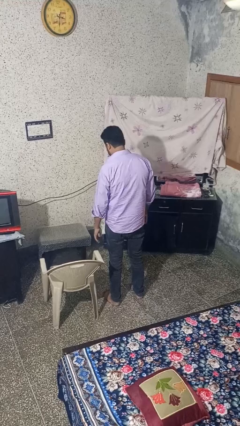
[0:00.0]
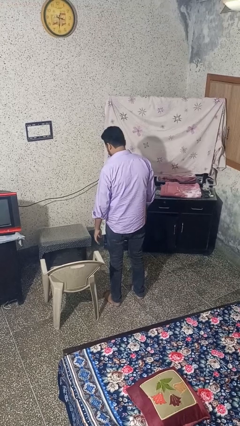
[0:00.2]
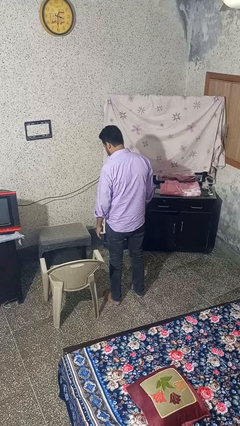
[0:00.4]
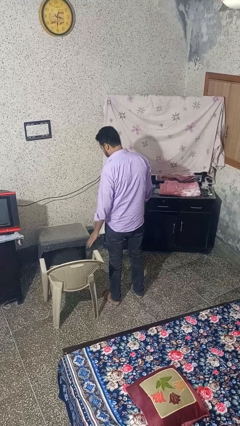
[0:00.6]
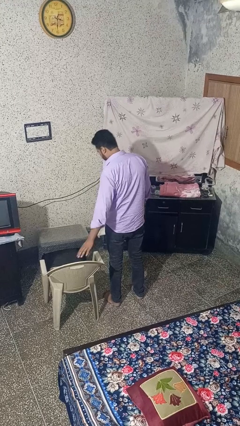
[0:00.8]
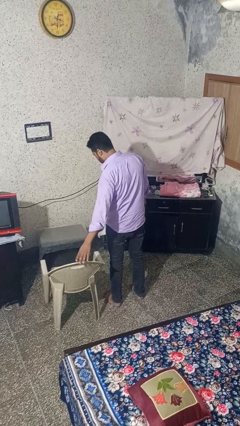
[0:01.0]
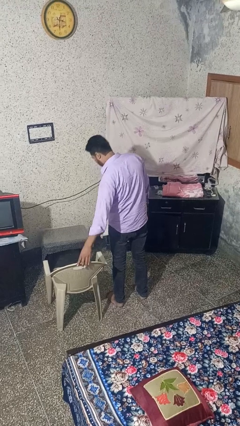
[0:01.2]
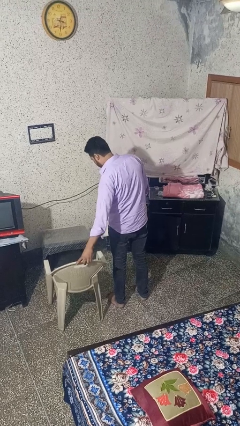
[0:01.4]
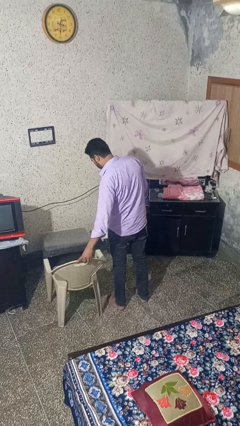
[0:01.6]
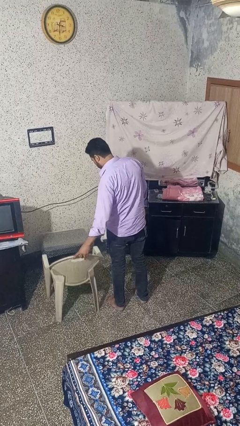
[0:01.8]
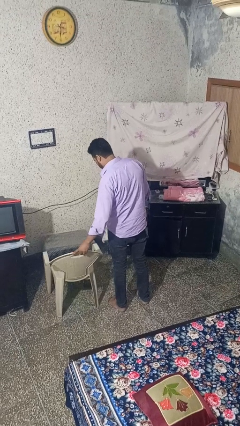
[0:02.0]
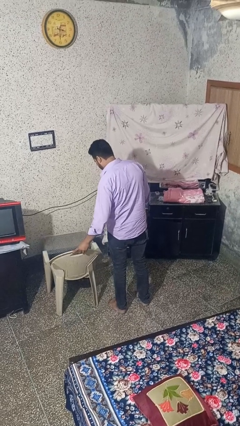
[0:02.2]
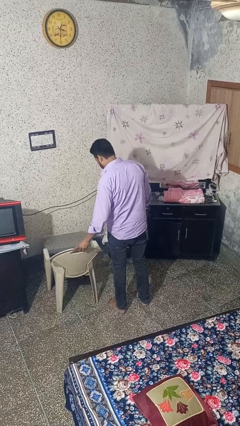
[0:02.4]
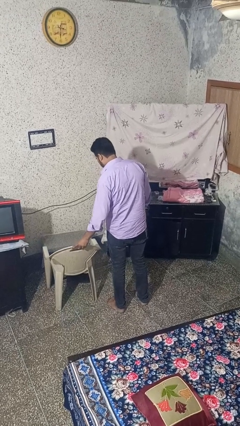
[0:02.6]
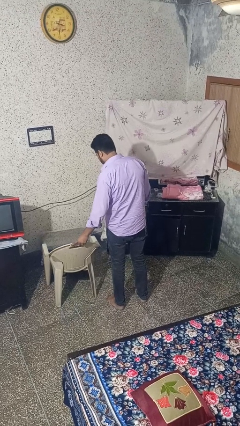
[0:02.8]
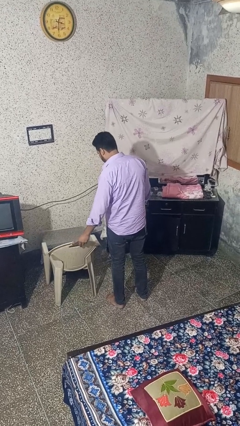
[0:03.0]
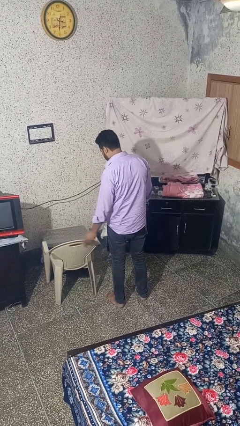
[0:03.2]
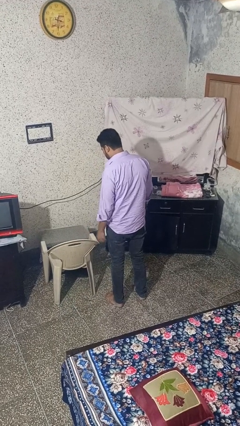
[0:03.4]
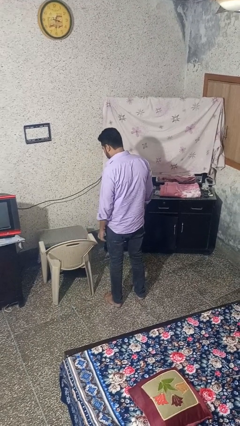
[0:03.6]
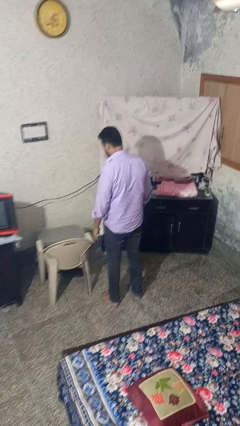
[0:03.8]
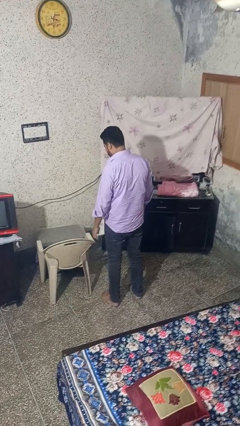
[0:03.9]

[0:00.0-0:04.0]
person pushes in chair

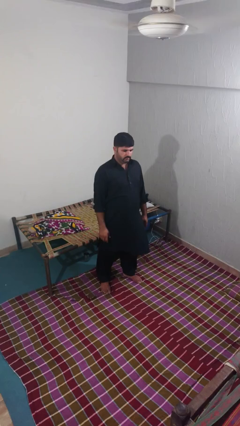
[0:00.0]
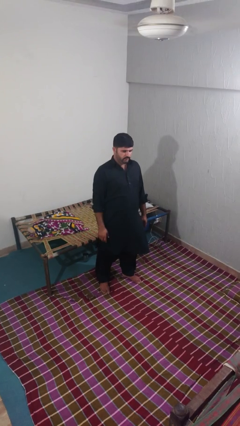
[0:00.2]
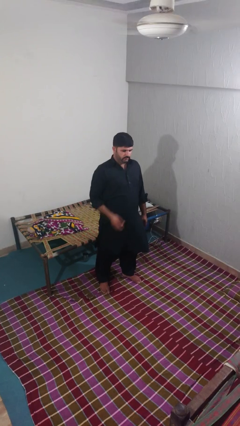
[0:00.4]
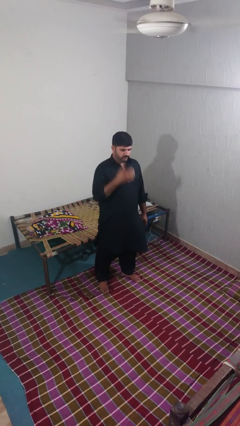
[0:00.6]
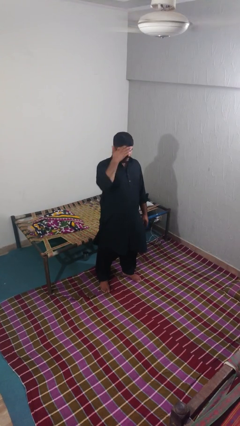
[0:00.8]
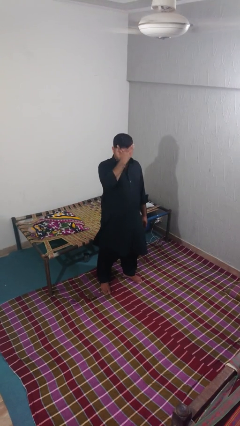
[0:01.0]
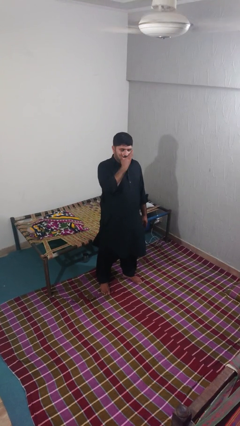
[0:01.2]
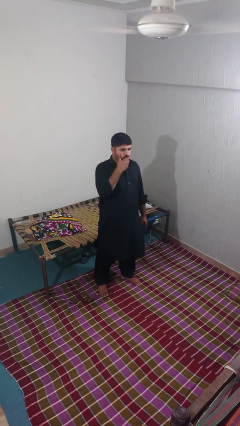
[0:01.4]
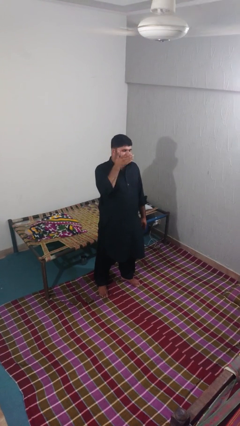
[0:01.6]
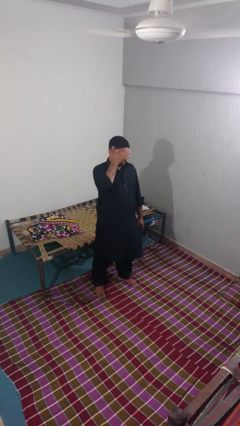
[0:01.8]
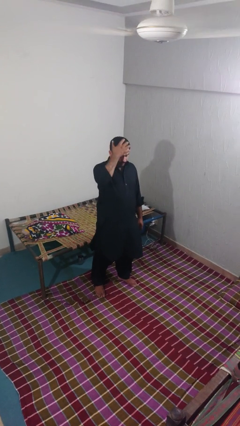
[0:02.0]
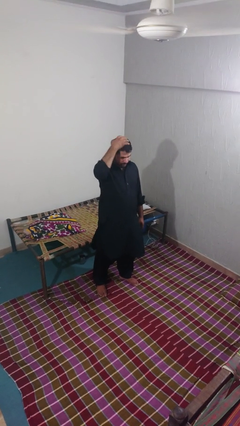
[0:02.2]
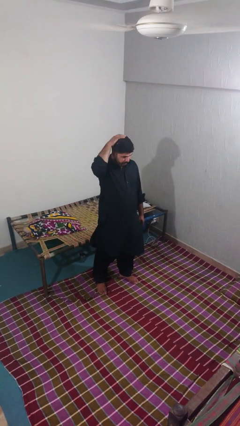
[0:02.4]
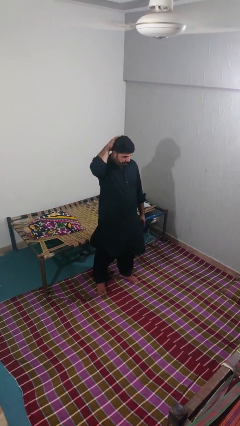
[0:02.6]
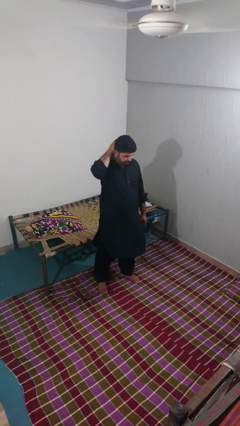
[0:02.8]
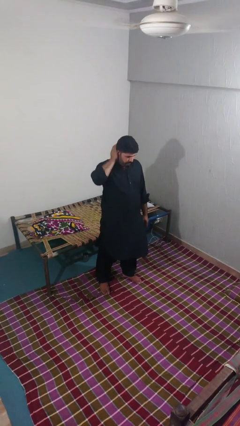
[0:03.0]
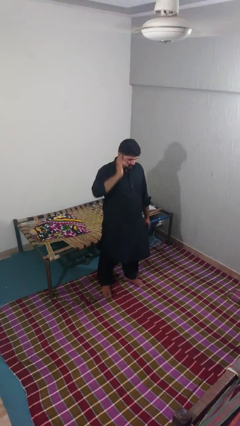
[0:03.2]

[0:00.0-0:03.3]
person scratches face

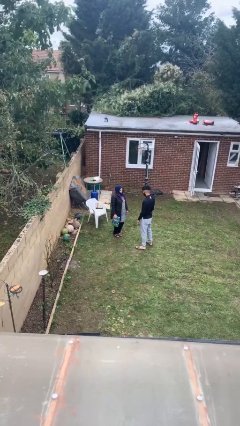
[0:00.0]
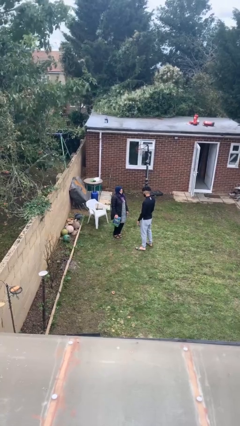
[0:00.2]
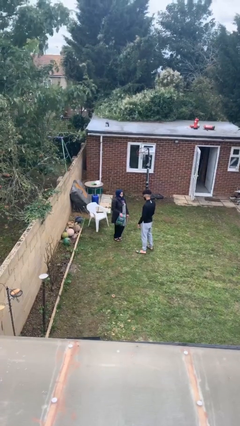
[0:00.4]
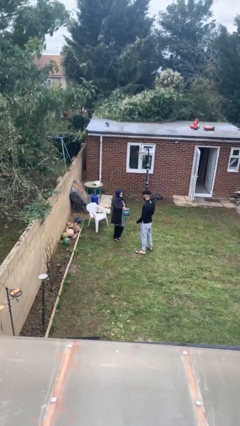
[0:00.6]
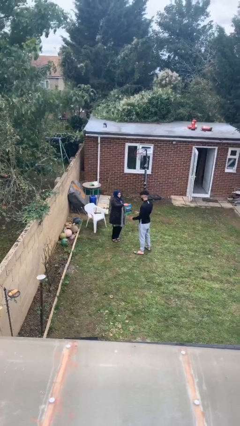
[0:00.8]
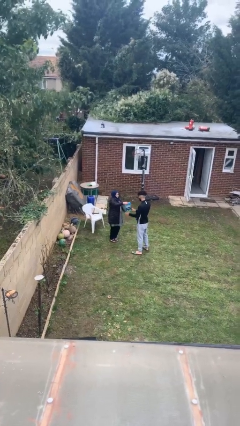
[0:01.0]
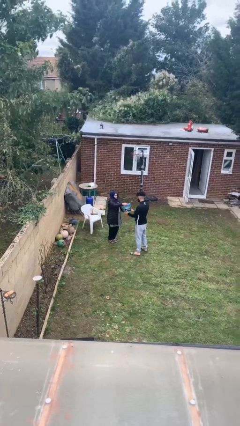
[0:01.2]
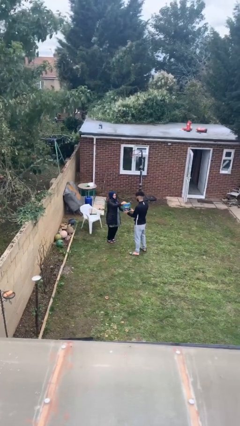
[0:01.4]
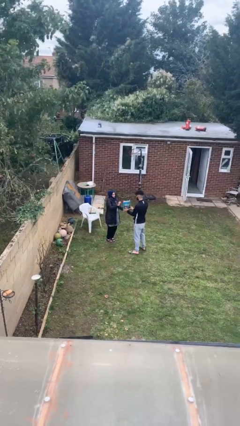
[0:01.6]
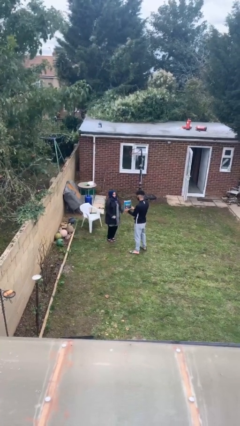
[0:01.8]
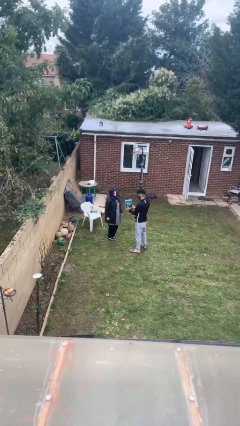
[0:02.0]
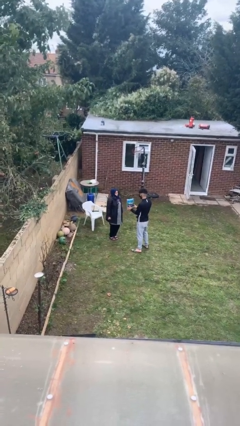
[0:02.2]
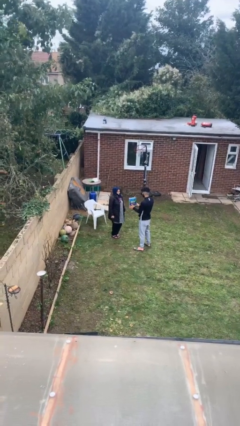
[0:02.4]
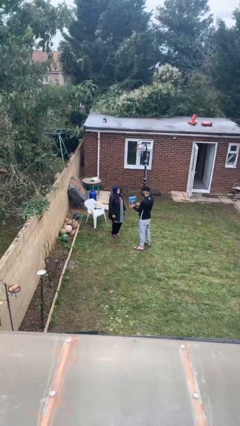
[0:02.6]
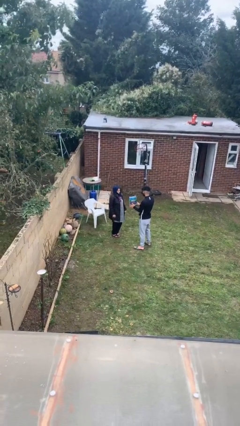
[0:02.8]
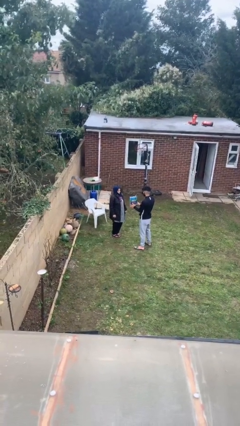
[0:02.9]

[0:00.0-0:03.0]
person transfers object to person

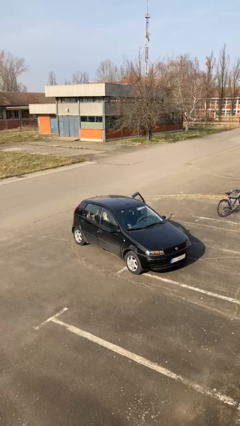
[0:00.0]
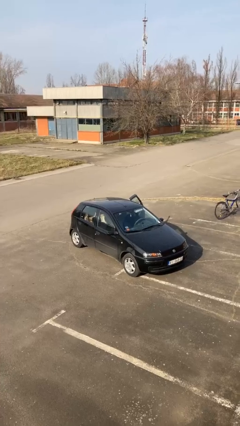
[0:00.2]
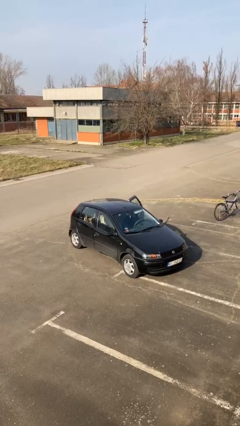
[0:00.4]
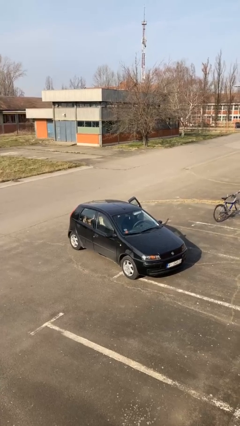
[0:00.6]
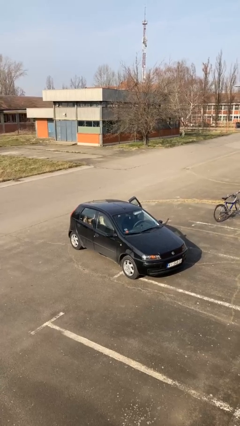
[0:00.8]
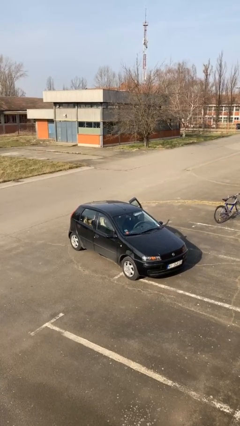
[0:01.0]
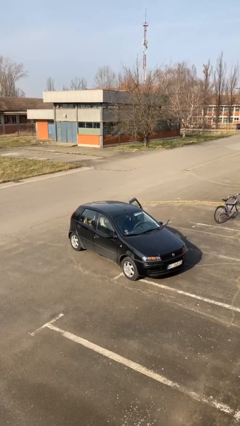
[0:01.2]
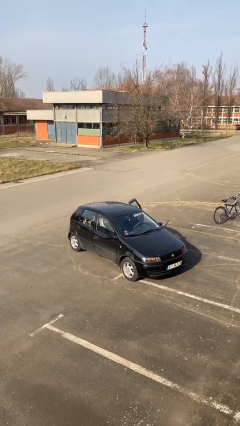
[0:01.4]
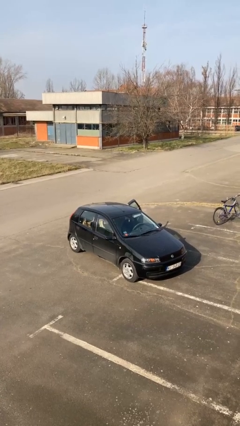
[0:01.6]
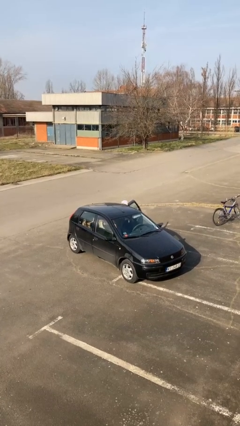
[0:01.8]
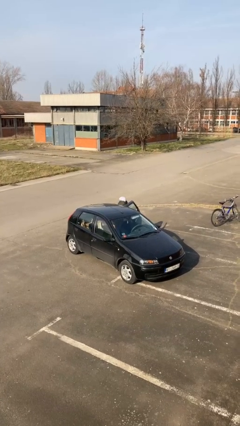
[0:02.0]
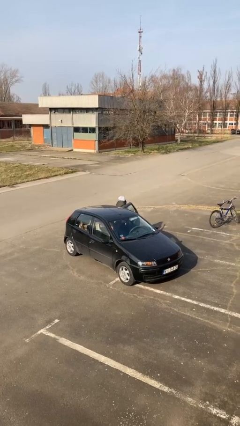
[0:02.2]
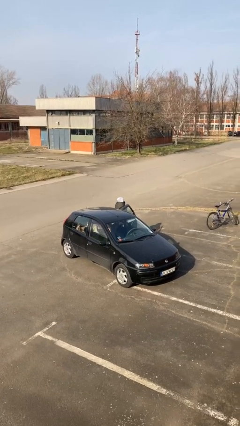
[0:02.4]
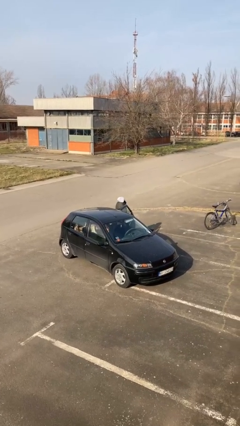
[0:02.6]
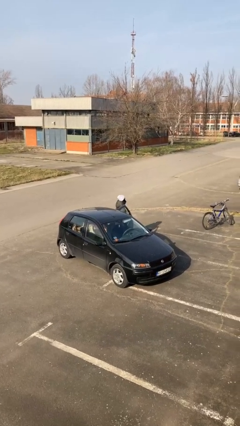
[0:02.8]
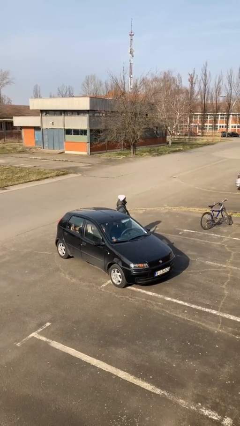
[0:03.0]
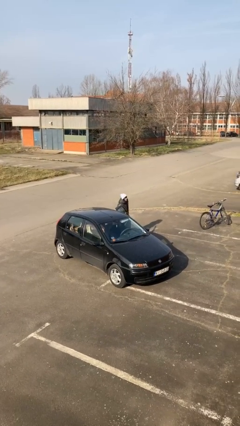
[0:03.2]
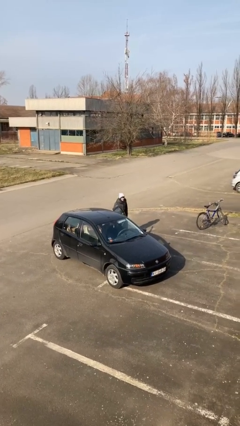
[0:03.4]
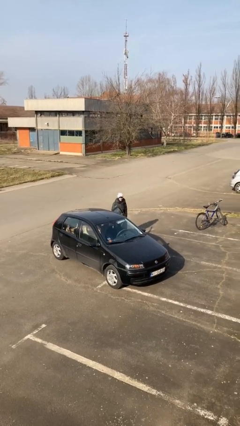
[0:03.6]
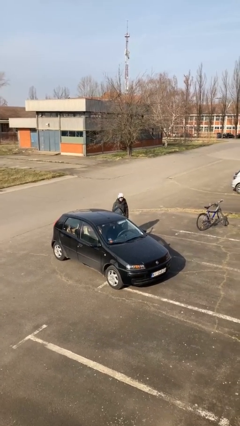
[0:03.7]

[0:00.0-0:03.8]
person exits car

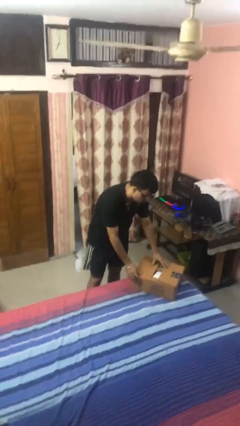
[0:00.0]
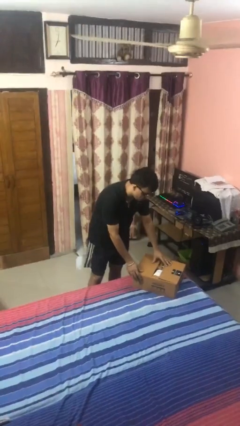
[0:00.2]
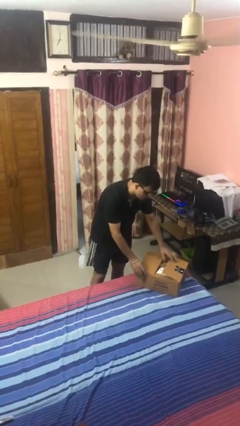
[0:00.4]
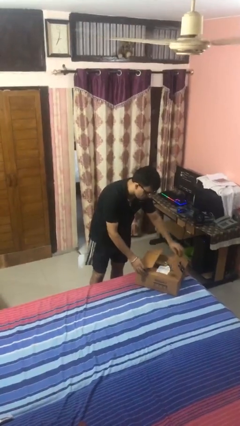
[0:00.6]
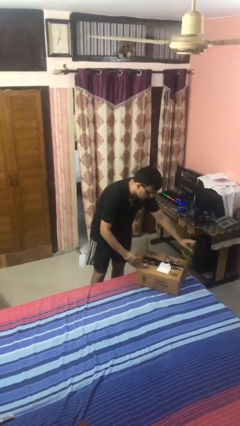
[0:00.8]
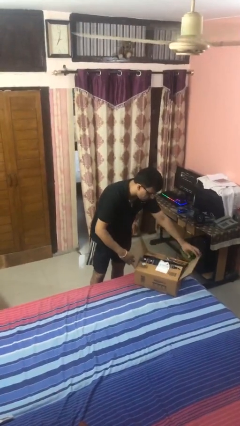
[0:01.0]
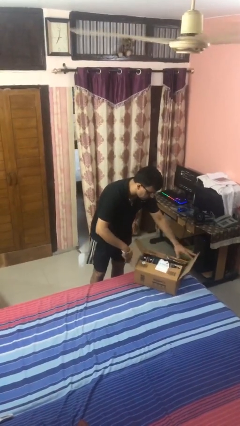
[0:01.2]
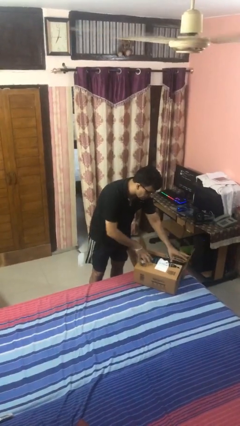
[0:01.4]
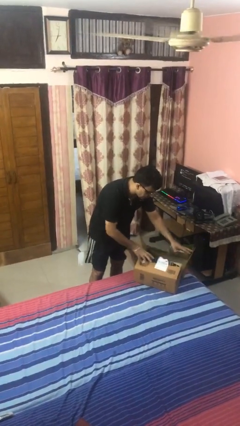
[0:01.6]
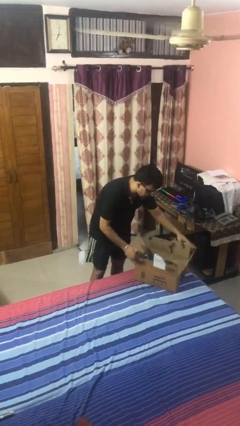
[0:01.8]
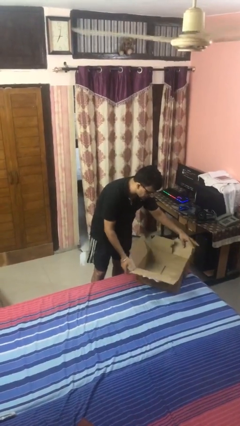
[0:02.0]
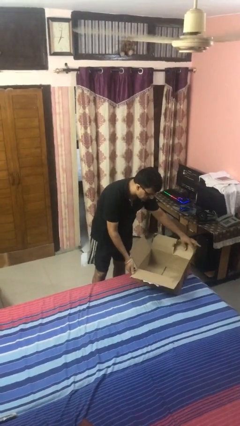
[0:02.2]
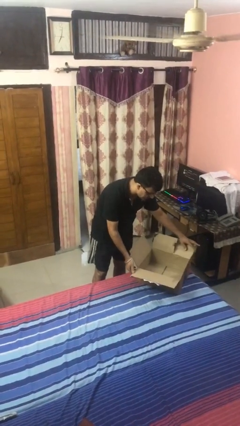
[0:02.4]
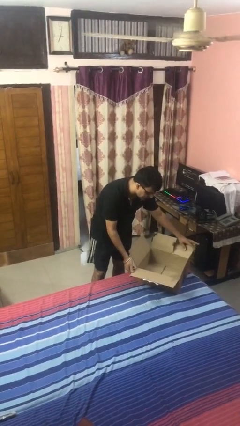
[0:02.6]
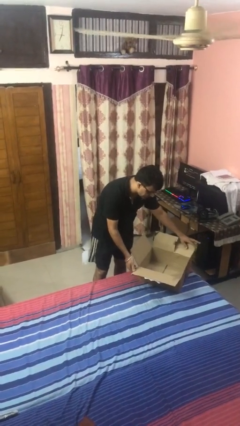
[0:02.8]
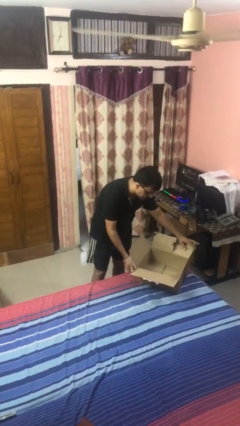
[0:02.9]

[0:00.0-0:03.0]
person opens box

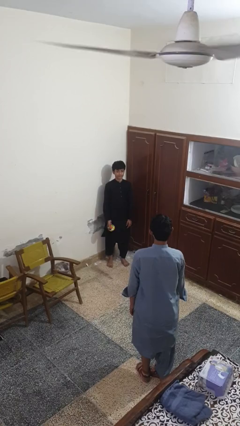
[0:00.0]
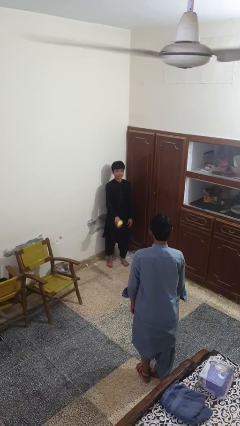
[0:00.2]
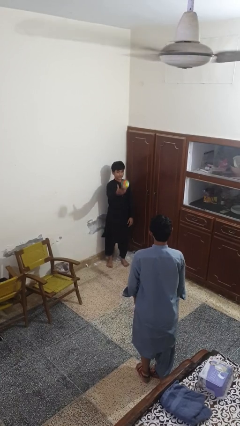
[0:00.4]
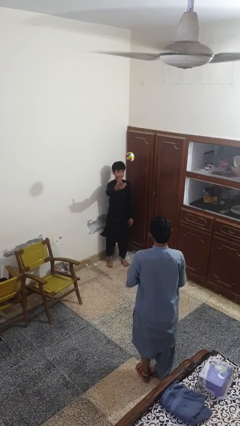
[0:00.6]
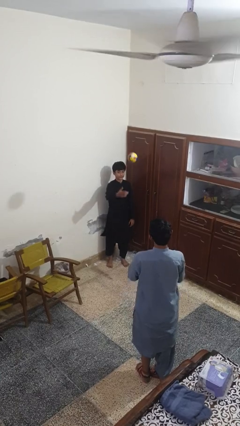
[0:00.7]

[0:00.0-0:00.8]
person throws object to person
